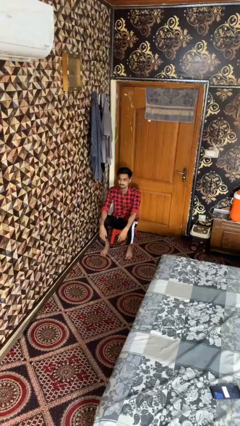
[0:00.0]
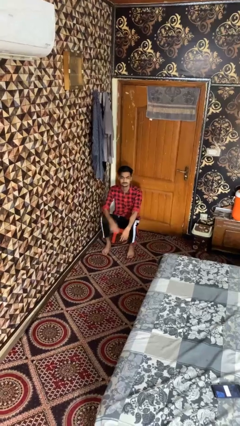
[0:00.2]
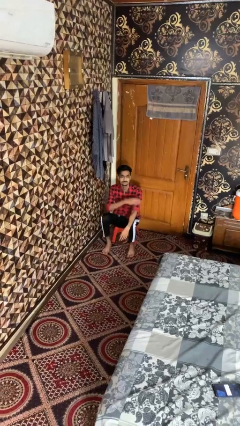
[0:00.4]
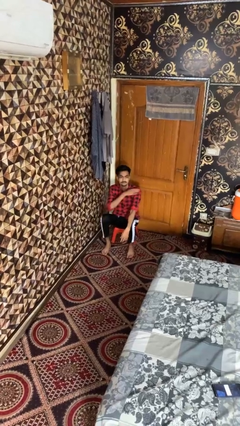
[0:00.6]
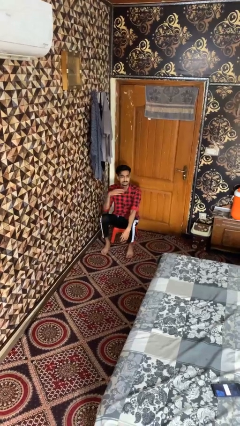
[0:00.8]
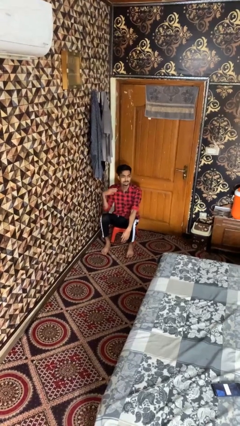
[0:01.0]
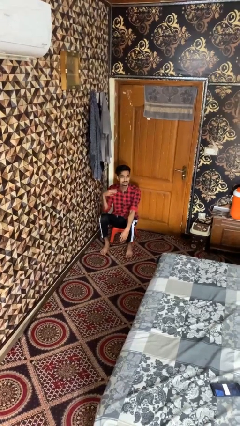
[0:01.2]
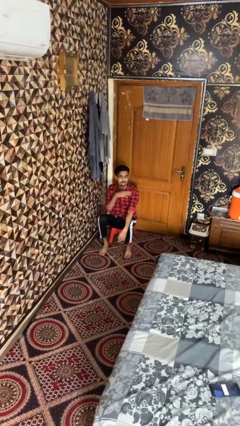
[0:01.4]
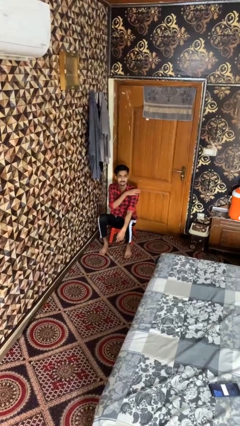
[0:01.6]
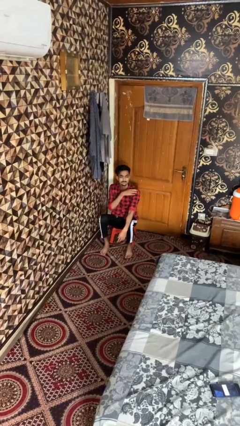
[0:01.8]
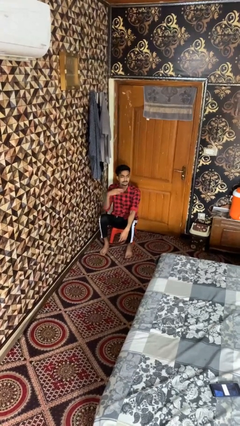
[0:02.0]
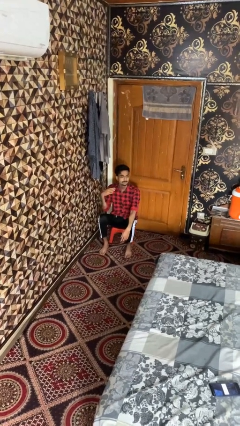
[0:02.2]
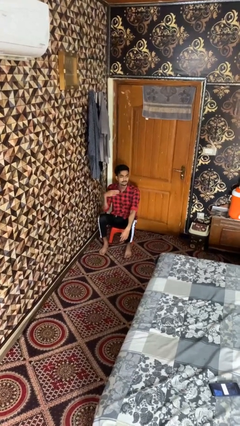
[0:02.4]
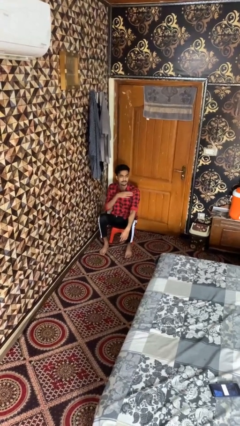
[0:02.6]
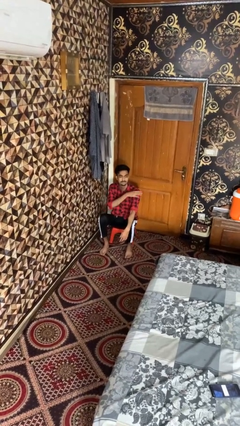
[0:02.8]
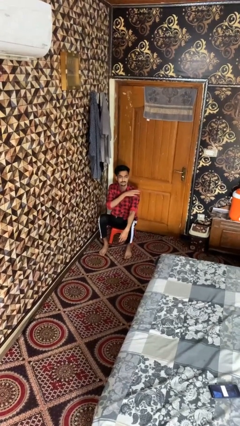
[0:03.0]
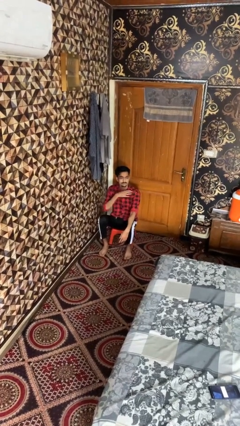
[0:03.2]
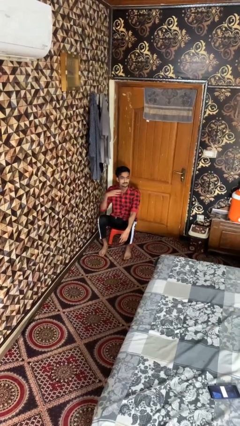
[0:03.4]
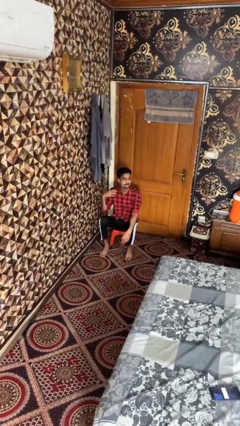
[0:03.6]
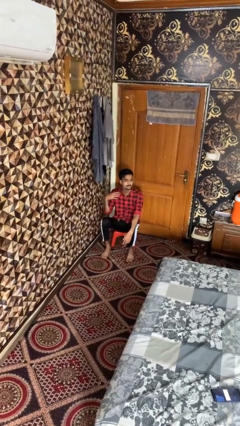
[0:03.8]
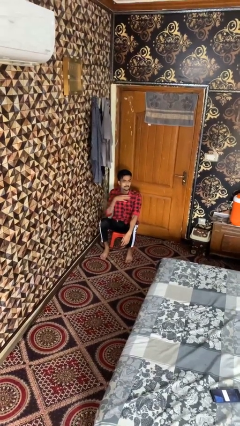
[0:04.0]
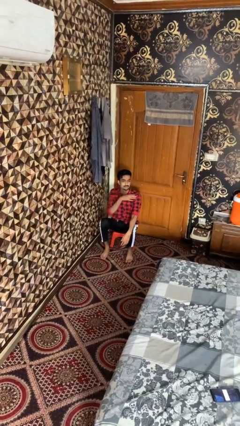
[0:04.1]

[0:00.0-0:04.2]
person gestures cut

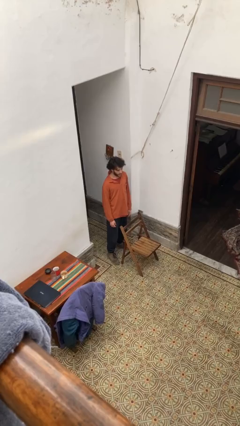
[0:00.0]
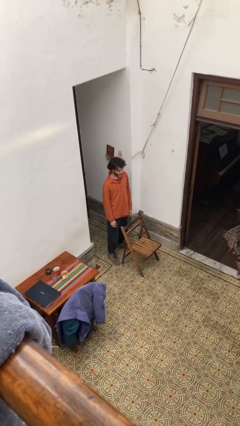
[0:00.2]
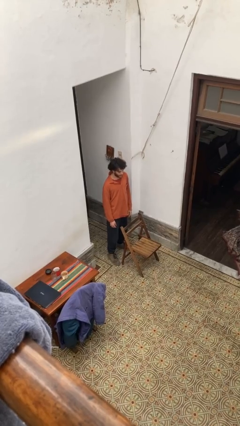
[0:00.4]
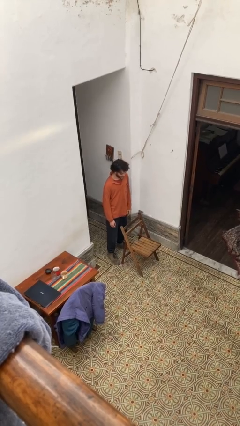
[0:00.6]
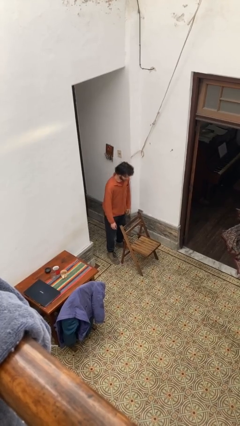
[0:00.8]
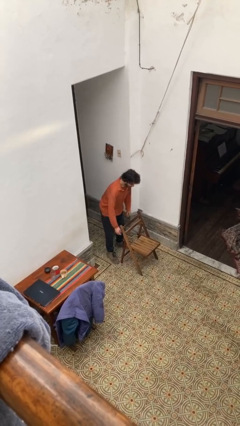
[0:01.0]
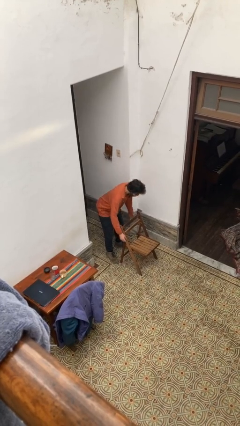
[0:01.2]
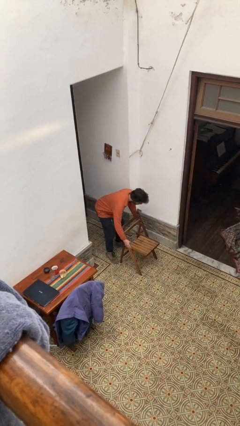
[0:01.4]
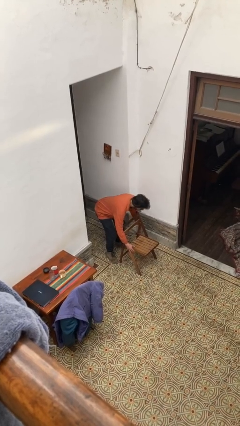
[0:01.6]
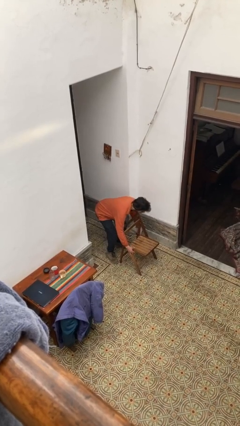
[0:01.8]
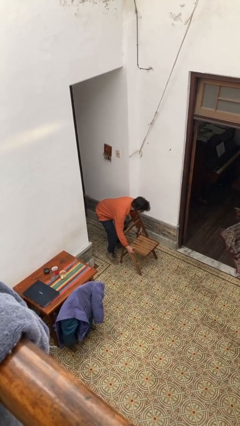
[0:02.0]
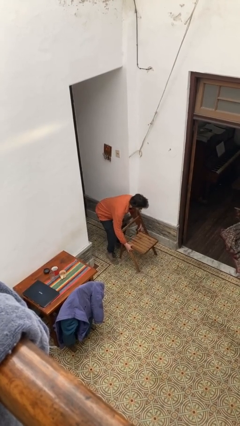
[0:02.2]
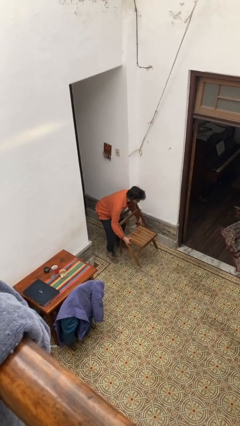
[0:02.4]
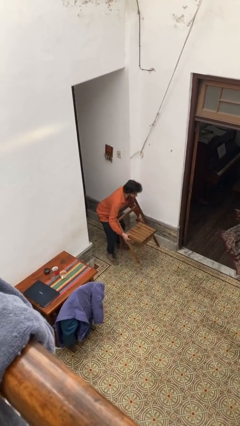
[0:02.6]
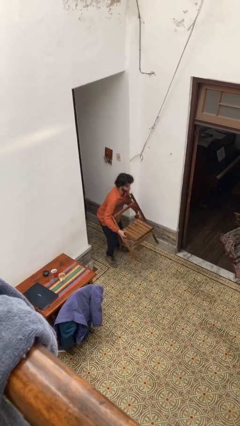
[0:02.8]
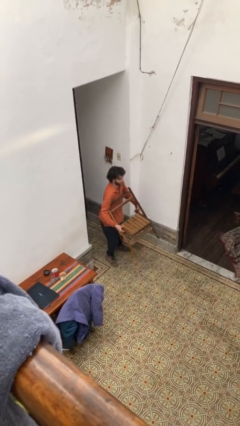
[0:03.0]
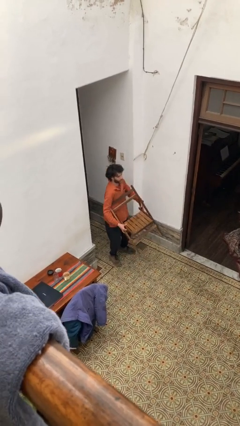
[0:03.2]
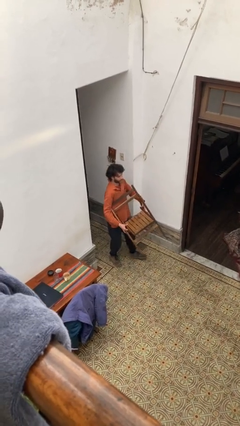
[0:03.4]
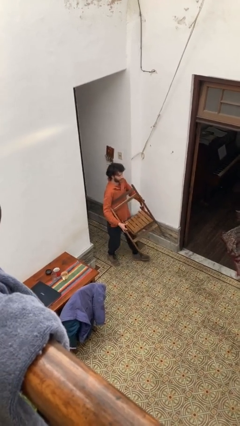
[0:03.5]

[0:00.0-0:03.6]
person picks up object from floor

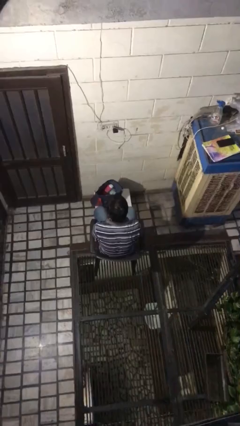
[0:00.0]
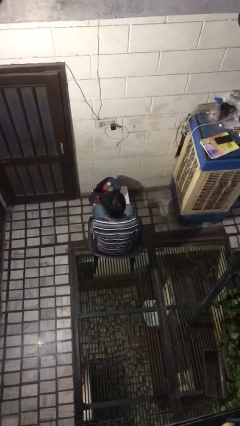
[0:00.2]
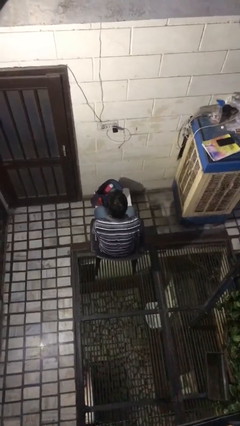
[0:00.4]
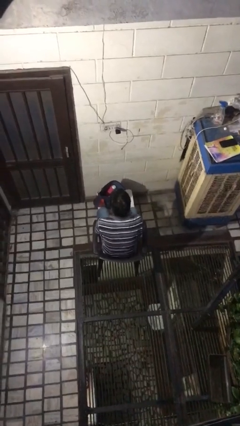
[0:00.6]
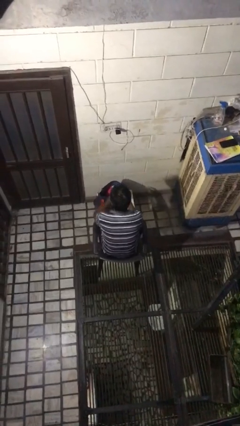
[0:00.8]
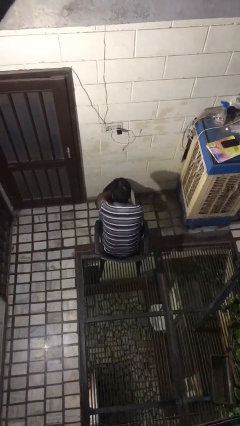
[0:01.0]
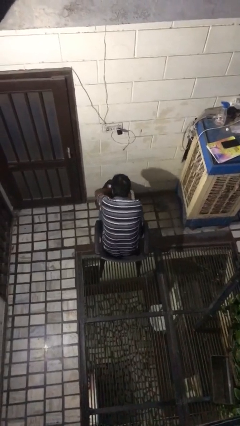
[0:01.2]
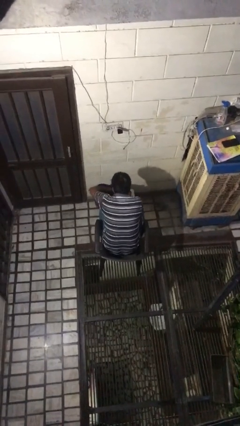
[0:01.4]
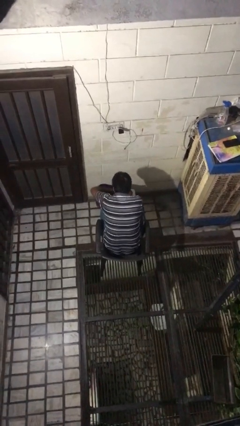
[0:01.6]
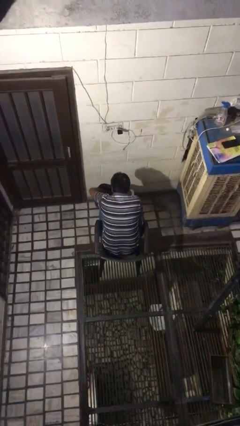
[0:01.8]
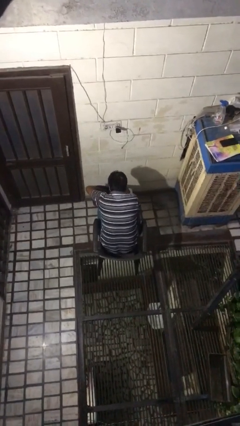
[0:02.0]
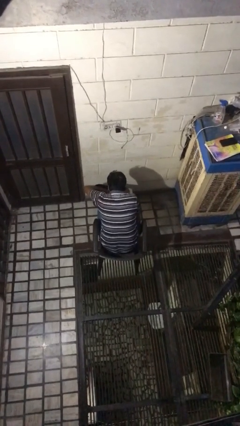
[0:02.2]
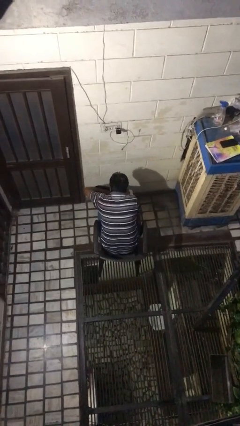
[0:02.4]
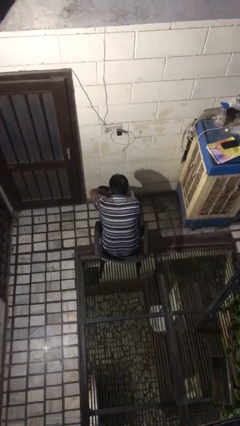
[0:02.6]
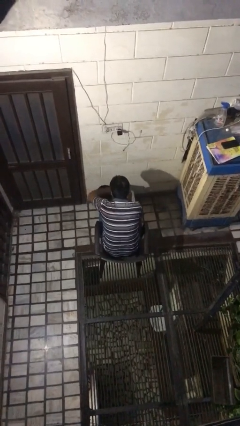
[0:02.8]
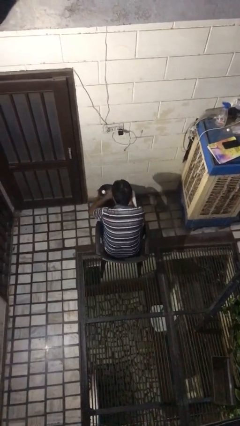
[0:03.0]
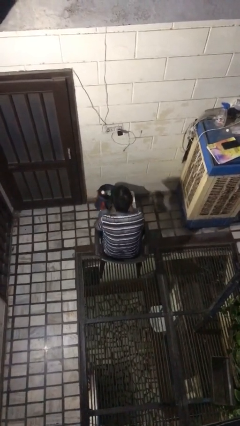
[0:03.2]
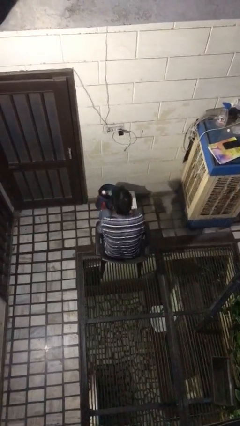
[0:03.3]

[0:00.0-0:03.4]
person searches in bag

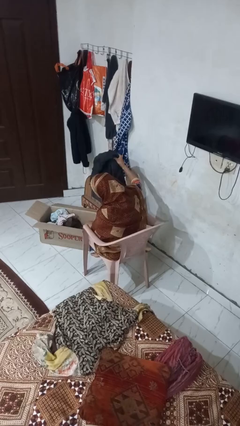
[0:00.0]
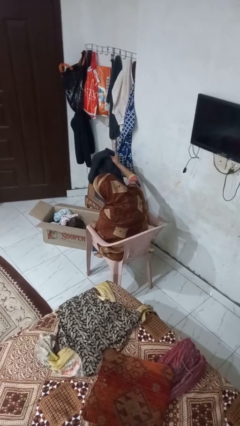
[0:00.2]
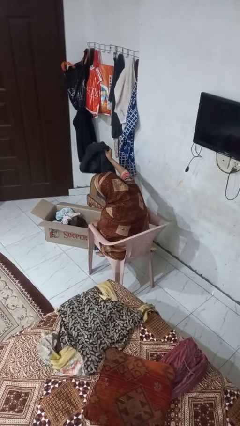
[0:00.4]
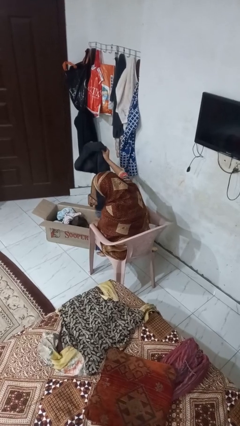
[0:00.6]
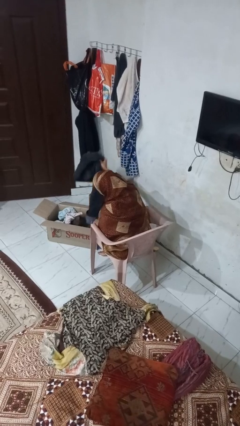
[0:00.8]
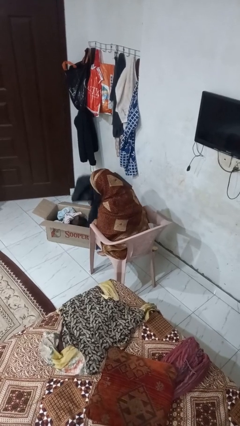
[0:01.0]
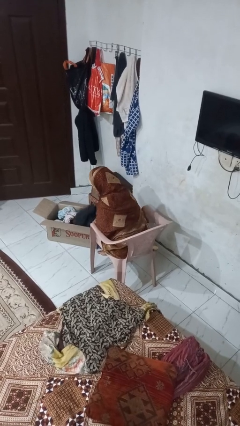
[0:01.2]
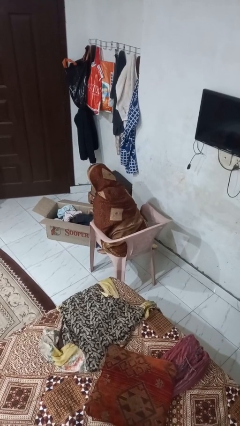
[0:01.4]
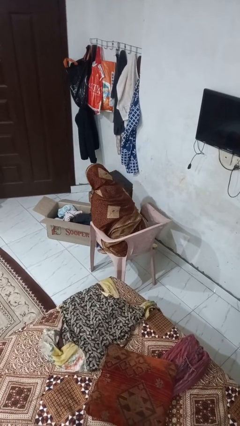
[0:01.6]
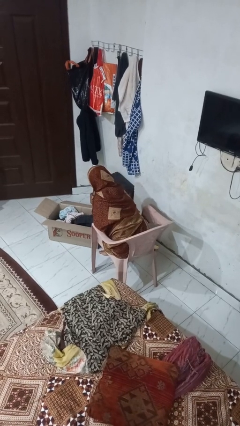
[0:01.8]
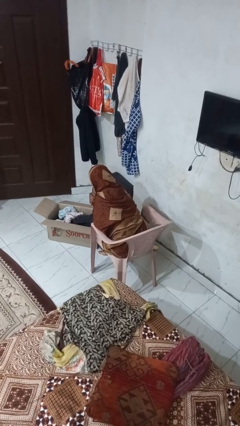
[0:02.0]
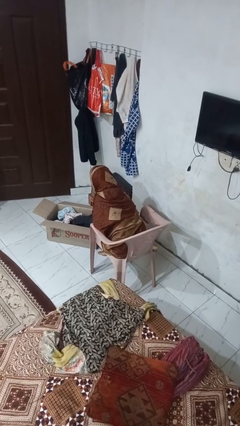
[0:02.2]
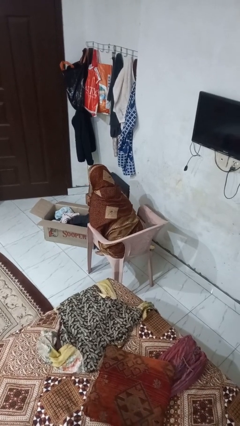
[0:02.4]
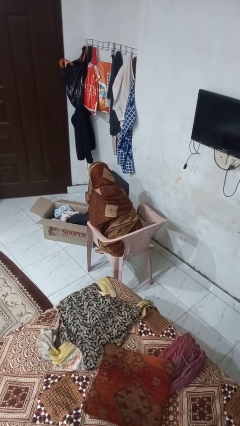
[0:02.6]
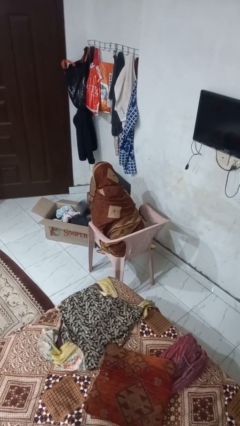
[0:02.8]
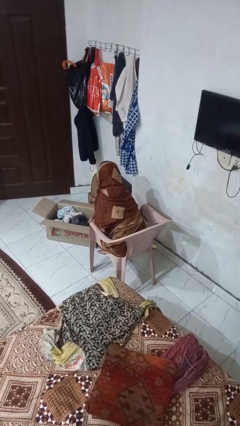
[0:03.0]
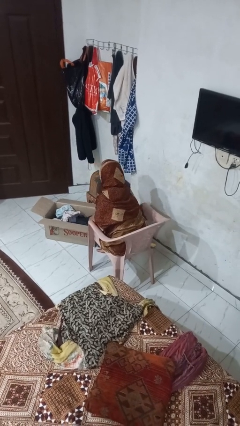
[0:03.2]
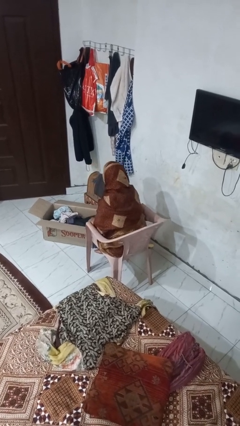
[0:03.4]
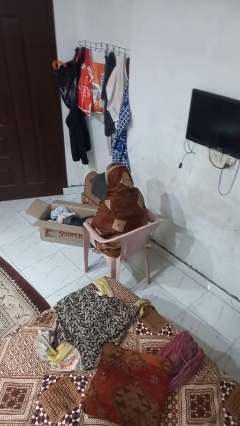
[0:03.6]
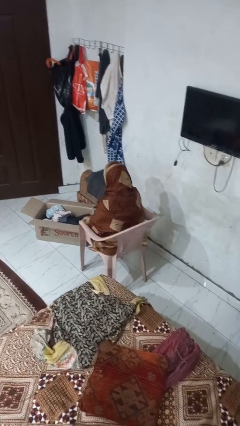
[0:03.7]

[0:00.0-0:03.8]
person puts object into box

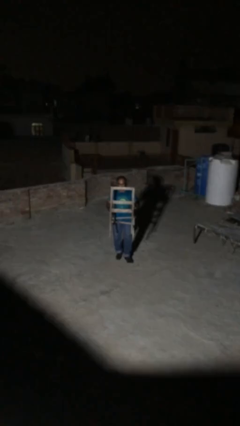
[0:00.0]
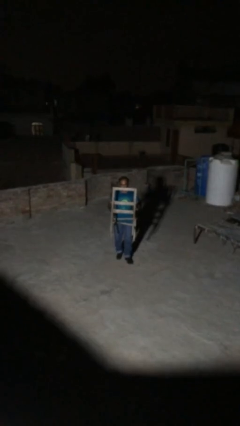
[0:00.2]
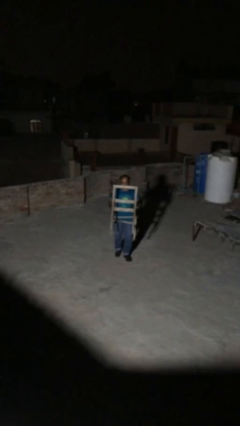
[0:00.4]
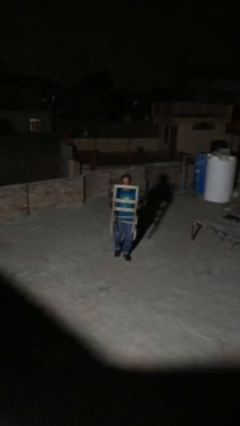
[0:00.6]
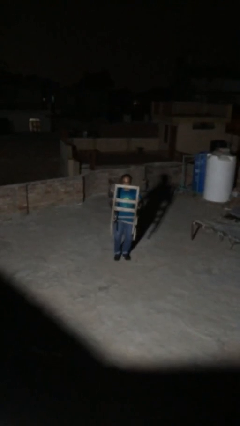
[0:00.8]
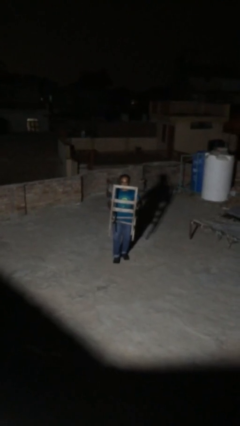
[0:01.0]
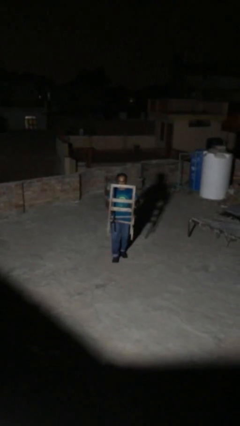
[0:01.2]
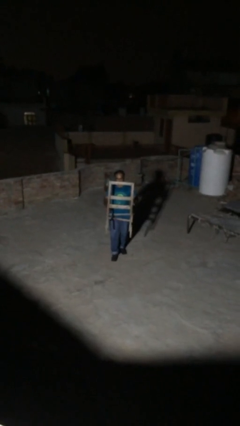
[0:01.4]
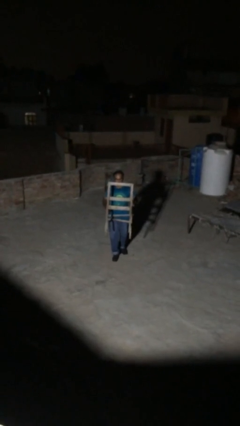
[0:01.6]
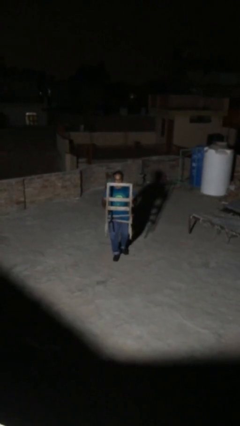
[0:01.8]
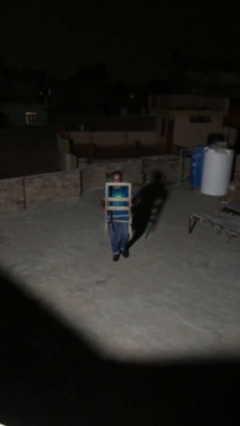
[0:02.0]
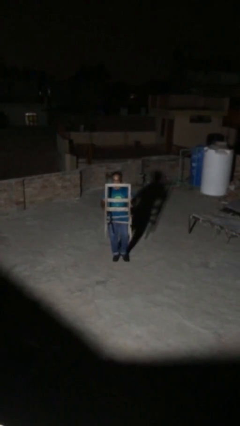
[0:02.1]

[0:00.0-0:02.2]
person carries heavy object

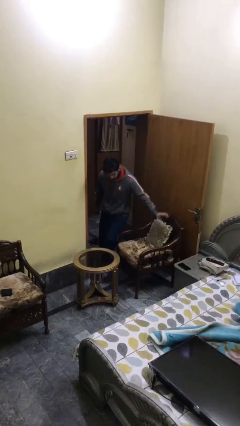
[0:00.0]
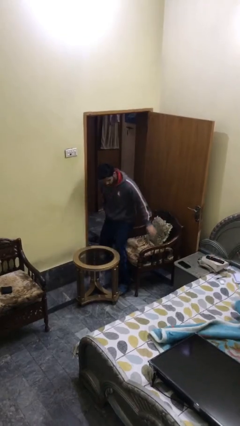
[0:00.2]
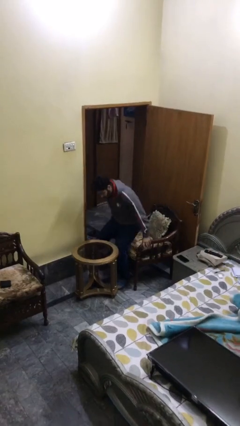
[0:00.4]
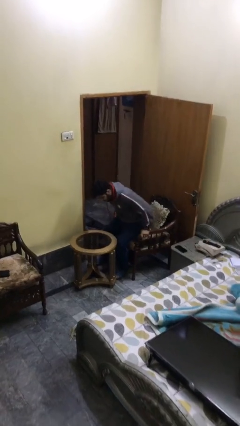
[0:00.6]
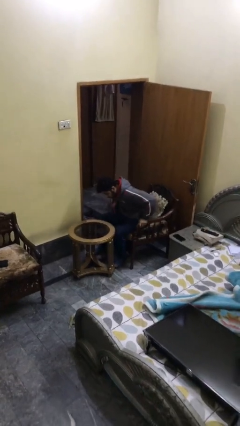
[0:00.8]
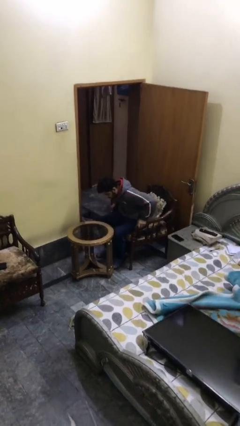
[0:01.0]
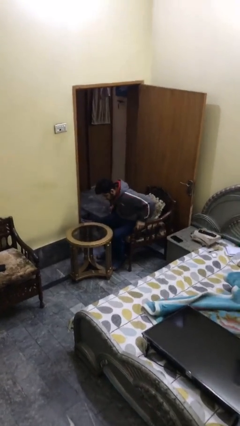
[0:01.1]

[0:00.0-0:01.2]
person sits down
